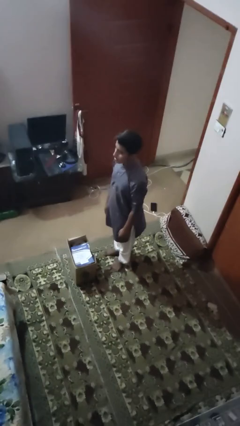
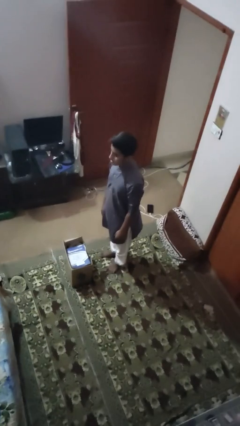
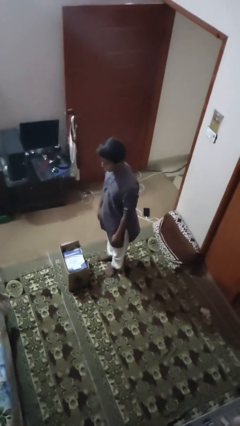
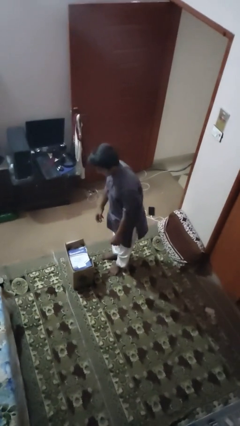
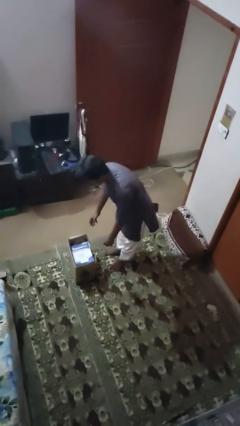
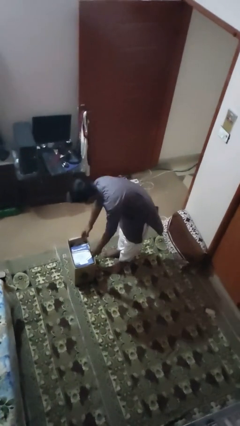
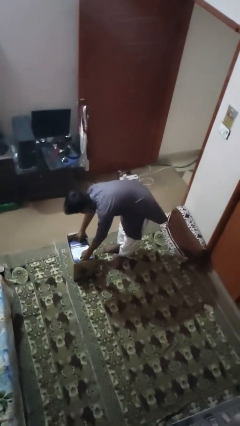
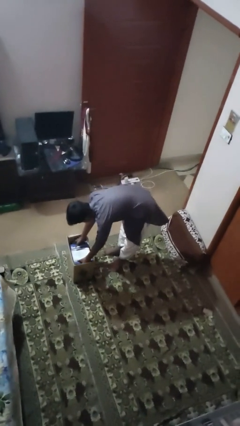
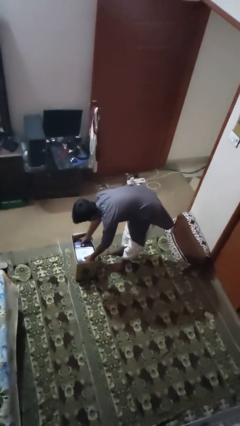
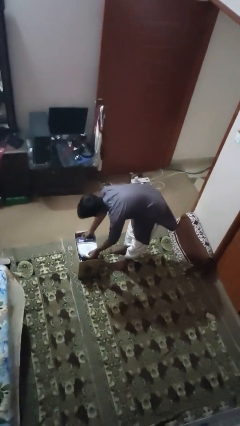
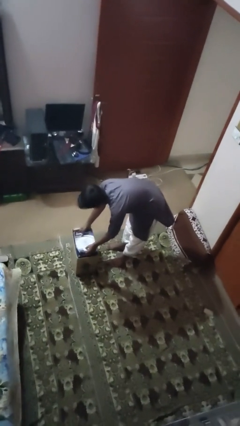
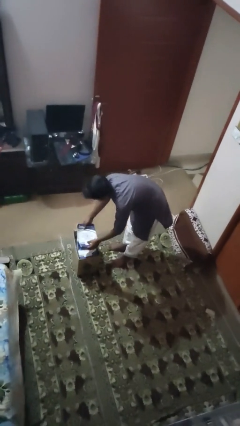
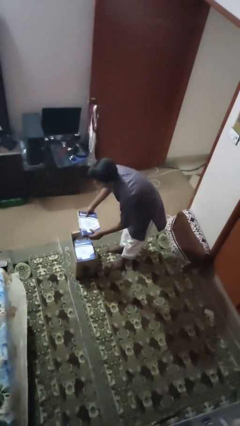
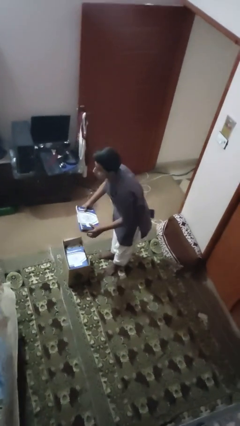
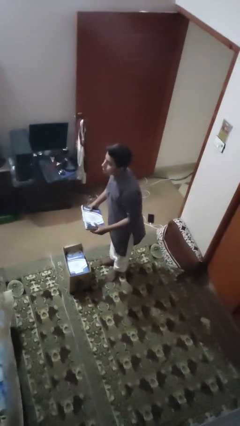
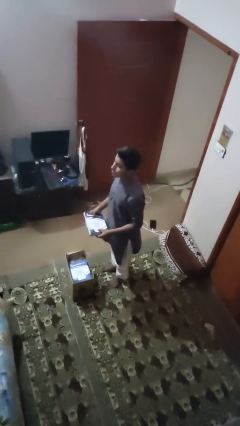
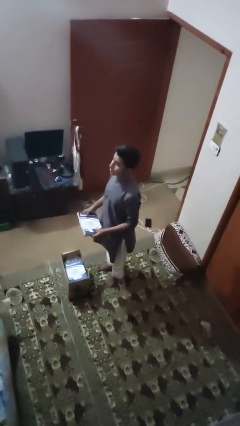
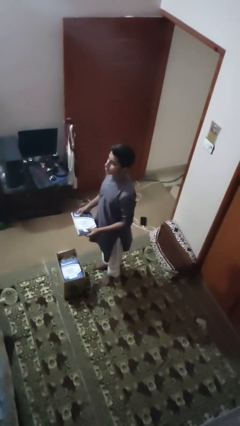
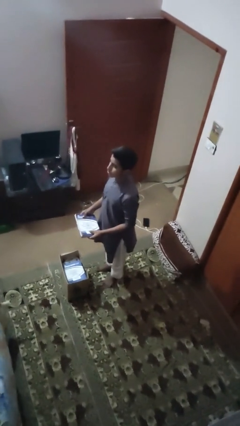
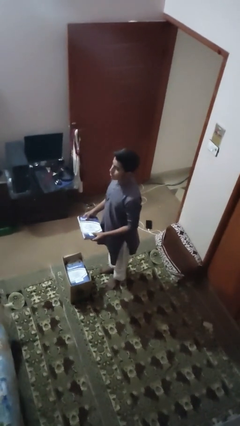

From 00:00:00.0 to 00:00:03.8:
person takes object from box

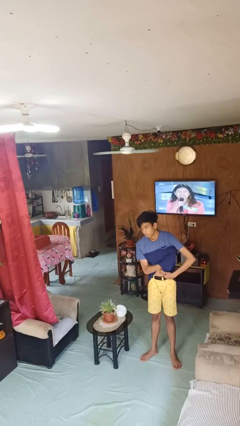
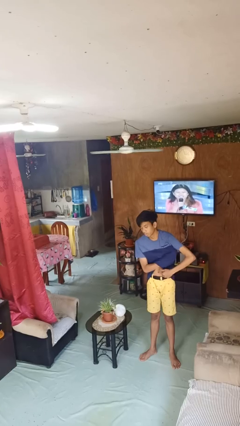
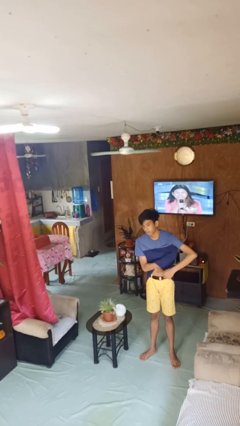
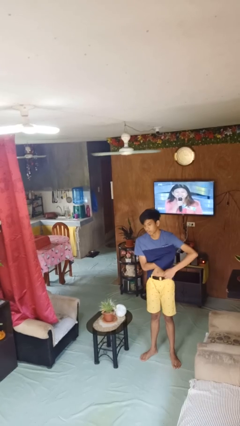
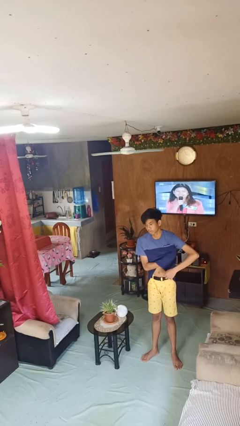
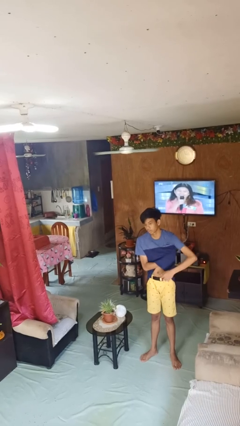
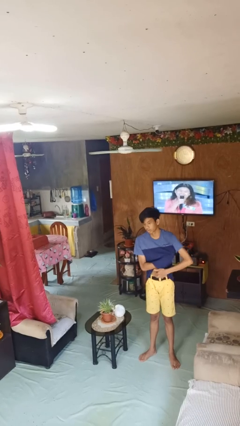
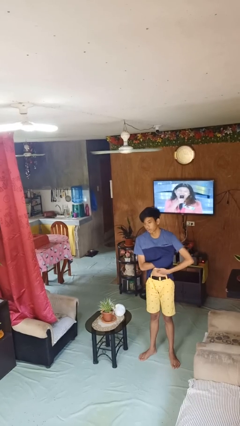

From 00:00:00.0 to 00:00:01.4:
person applies deodorant

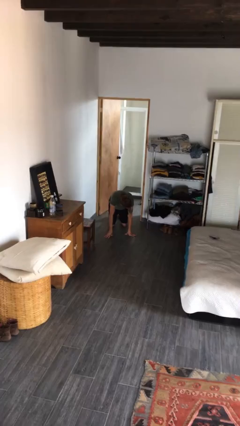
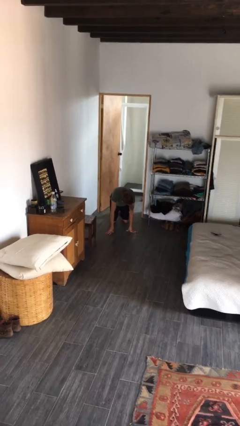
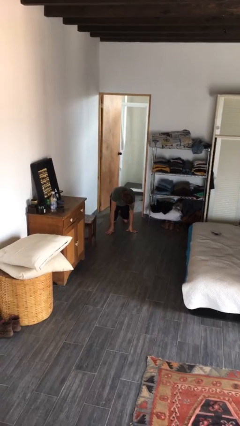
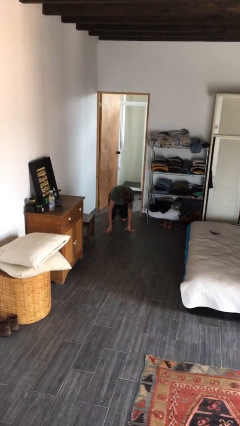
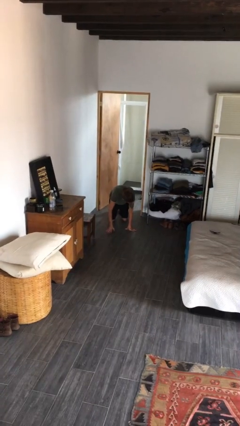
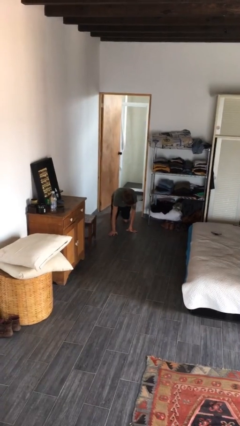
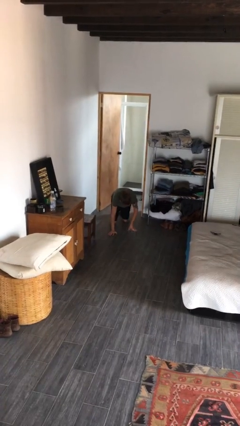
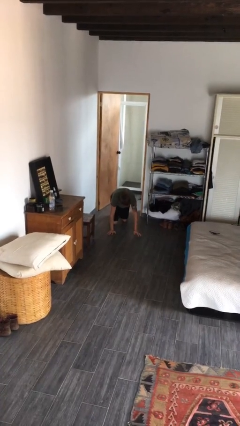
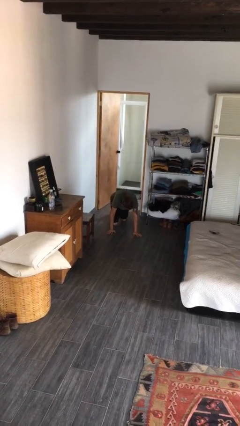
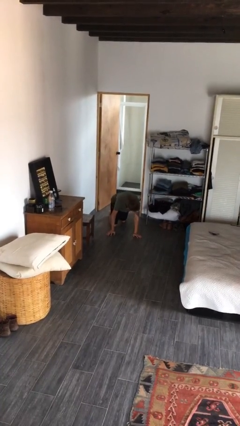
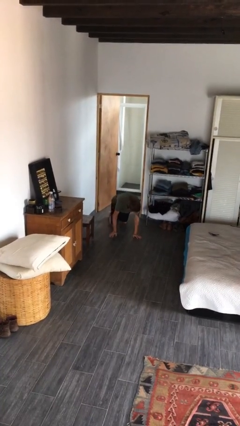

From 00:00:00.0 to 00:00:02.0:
person crawls

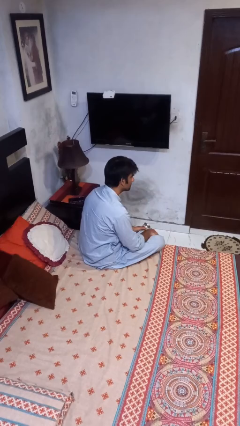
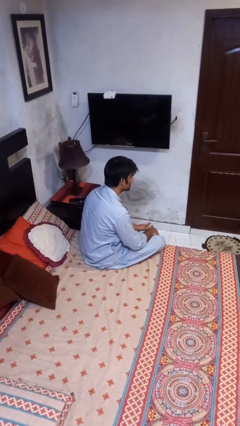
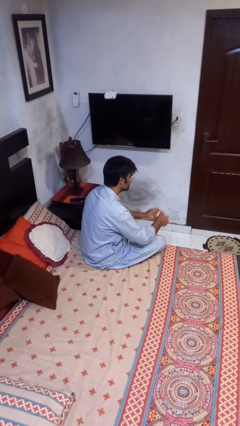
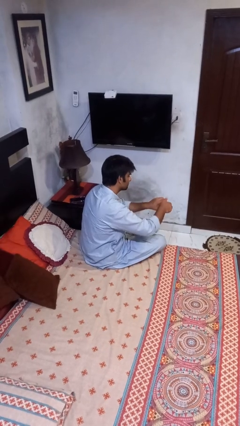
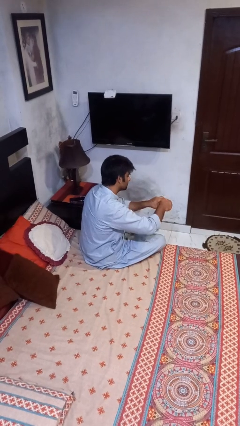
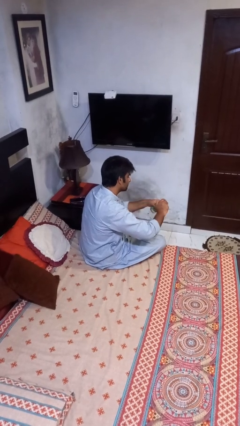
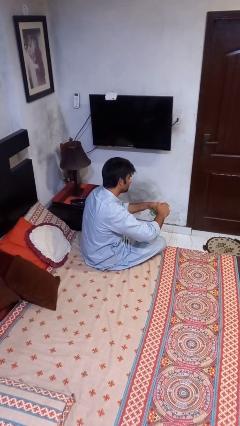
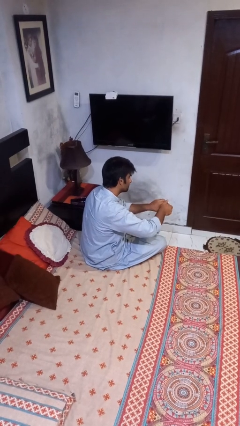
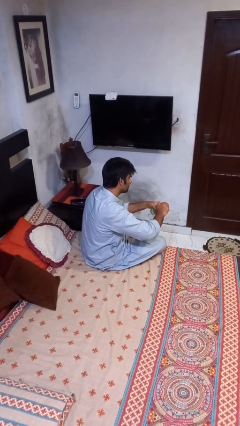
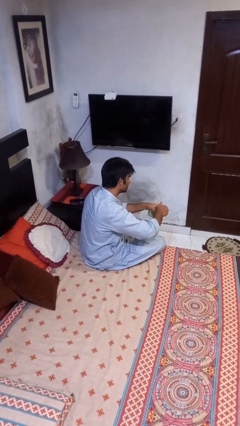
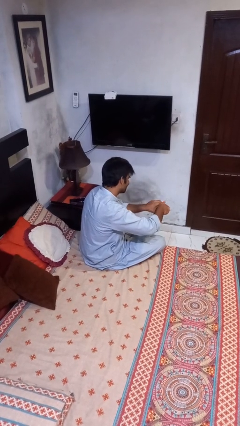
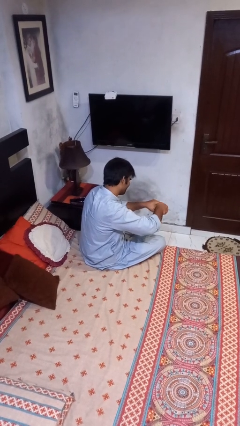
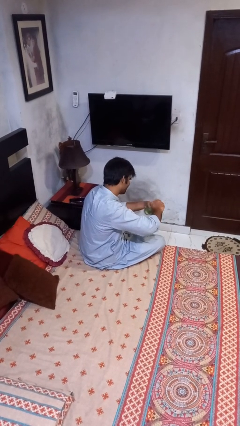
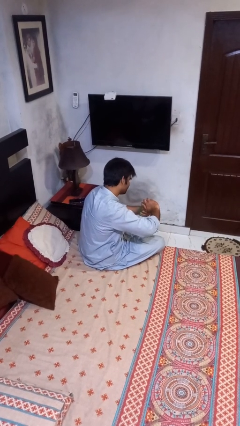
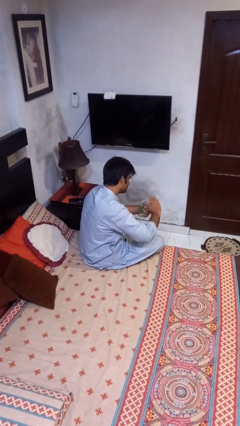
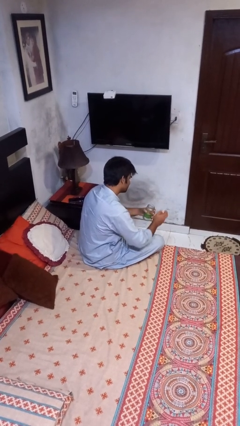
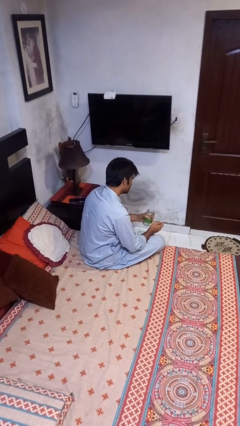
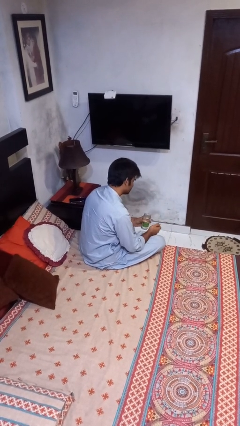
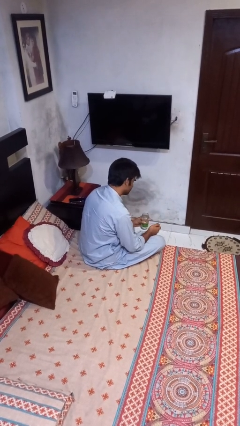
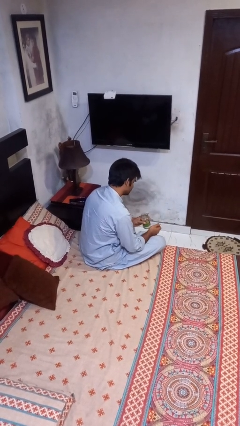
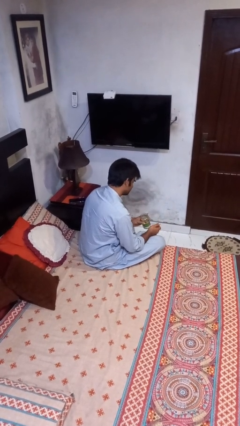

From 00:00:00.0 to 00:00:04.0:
person opens jar

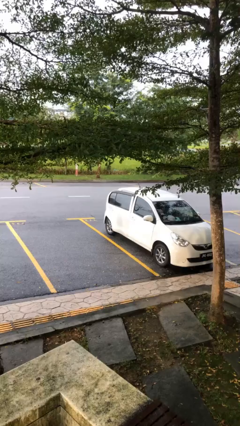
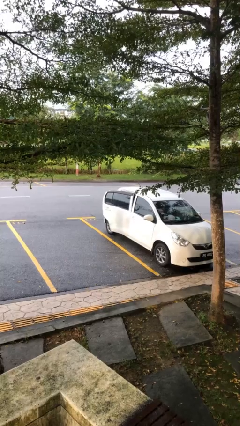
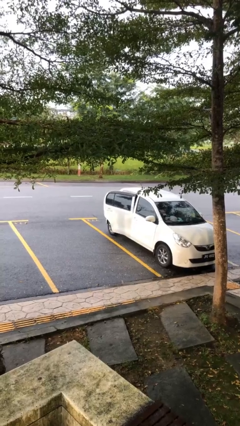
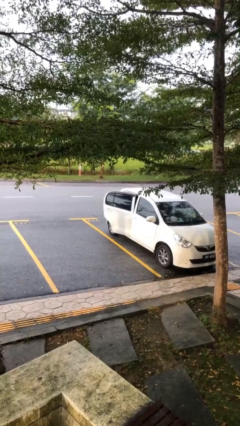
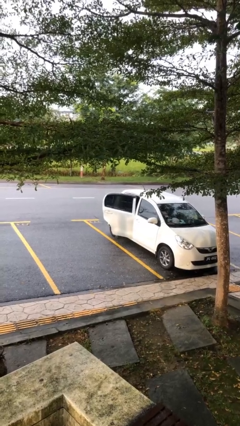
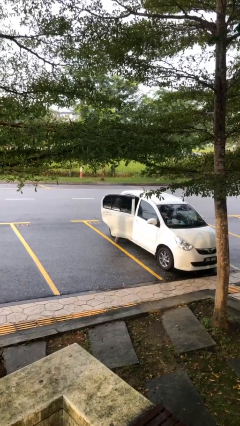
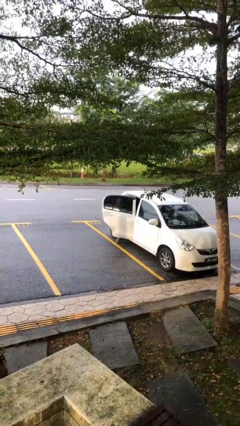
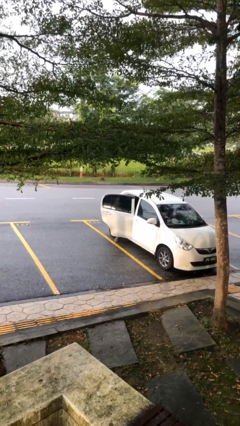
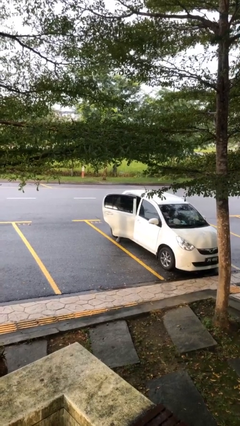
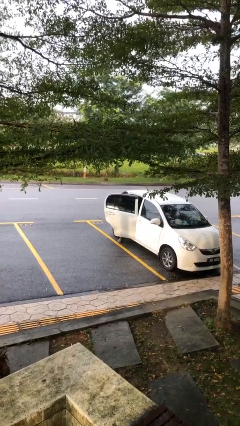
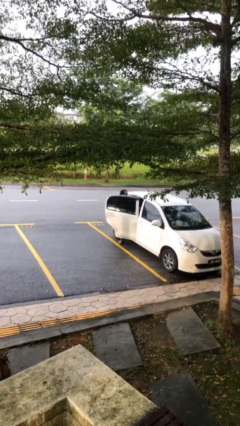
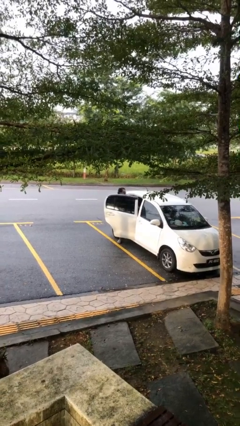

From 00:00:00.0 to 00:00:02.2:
person opens car door

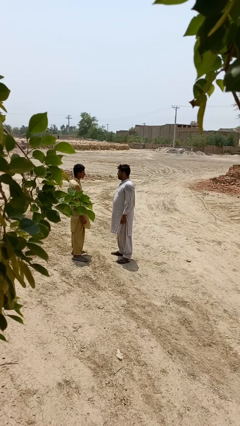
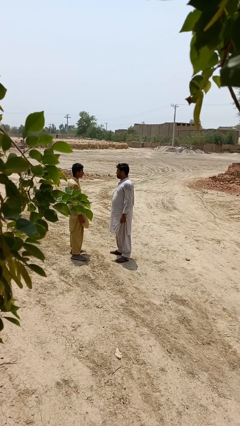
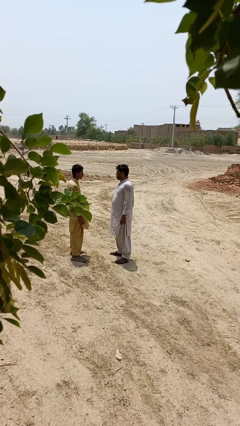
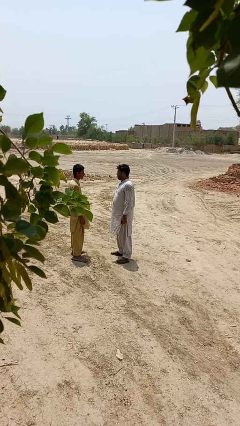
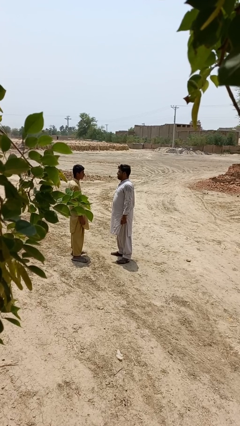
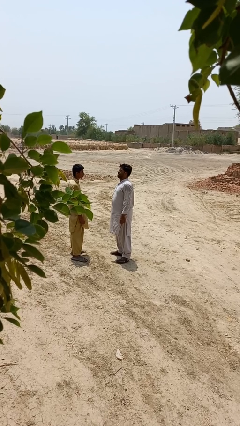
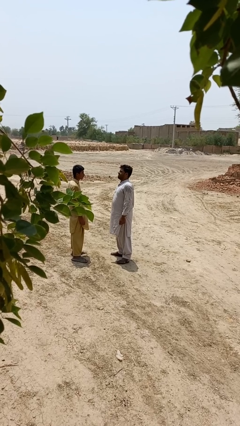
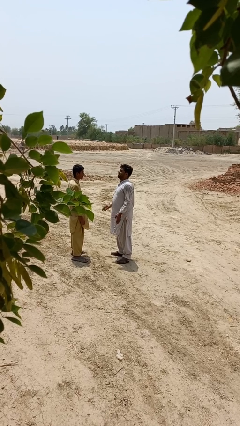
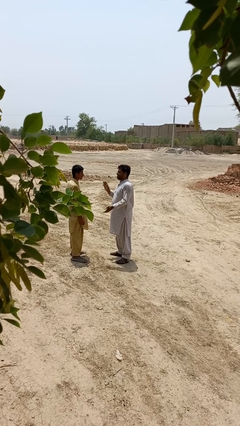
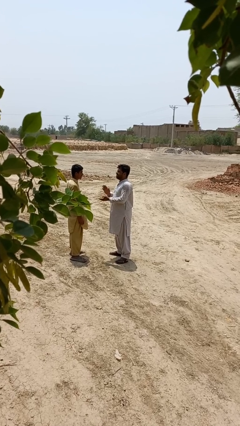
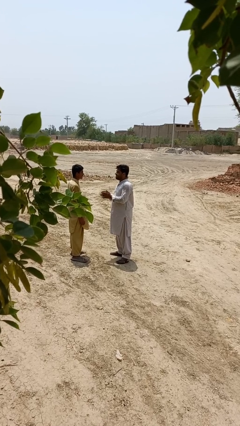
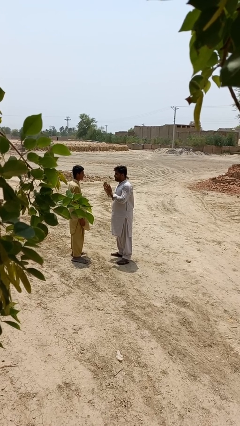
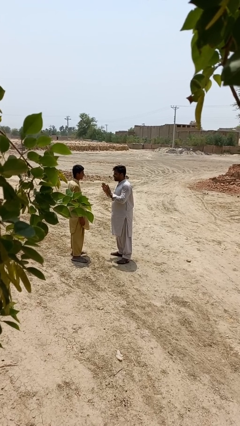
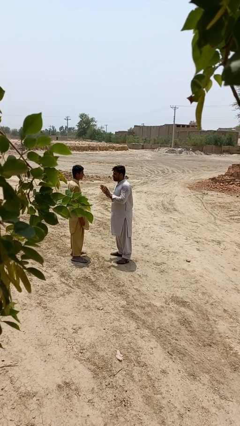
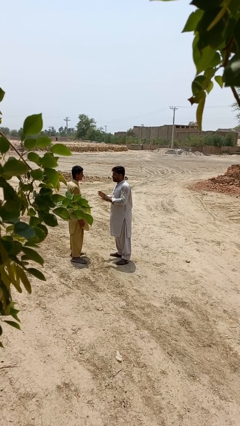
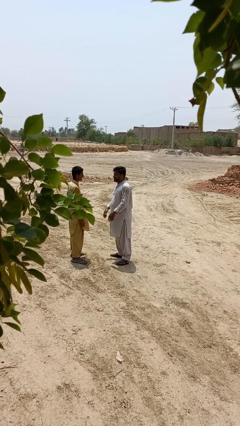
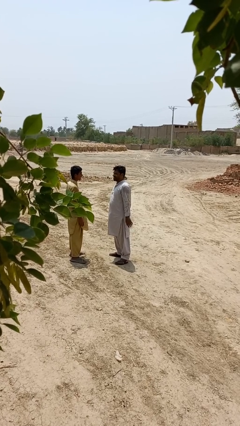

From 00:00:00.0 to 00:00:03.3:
person laughs with person

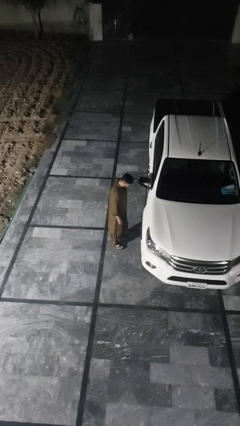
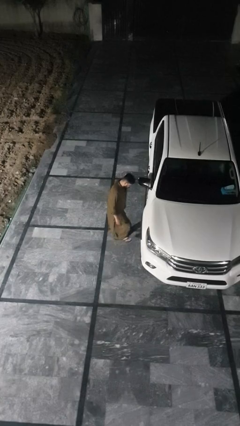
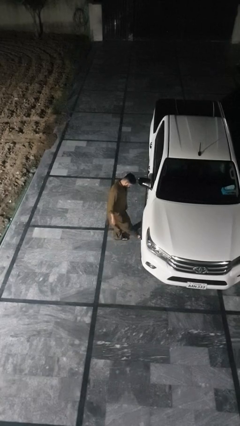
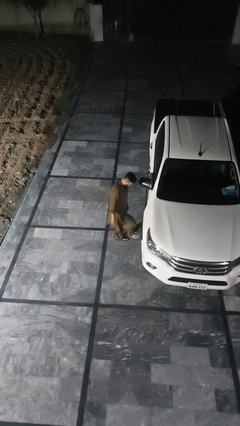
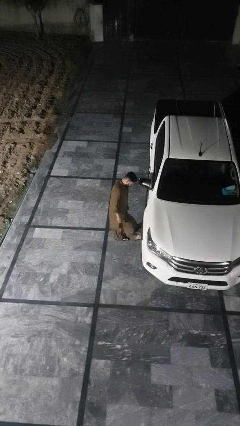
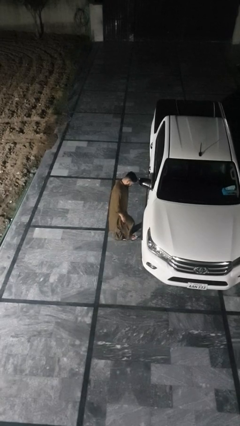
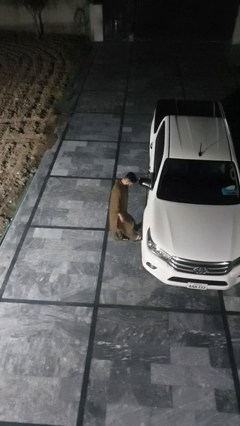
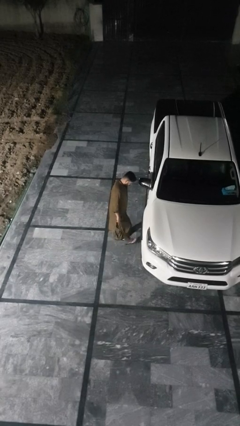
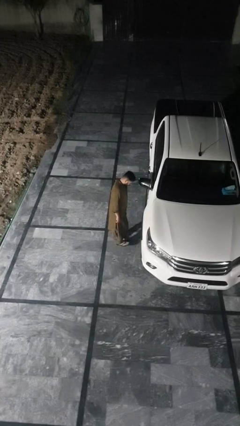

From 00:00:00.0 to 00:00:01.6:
person kicks car tires
